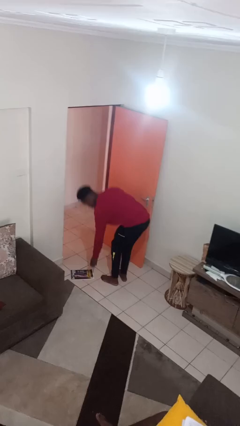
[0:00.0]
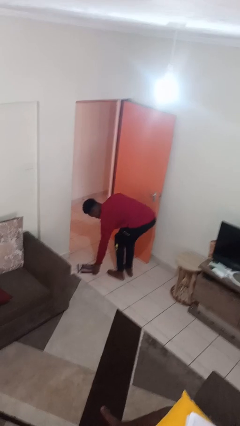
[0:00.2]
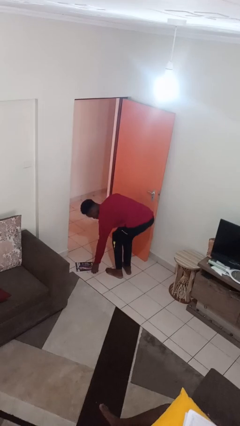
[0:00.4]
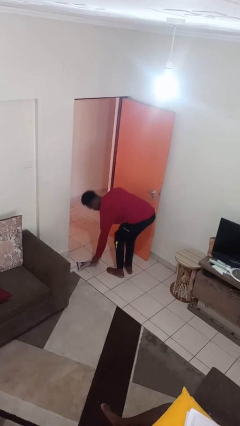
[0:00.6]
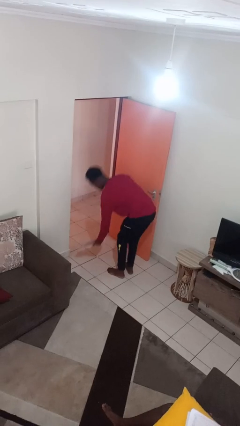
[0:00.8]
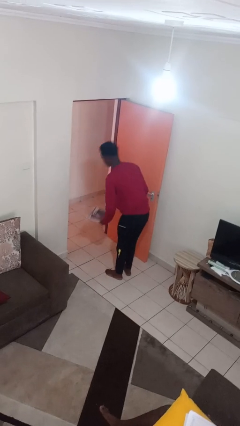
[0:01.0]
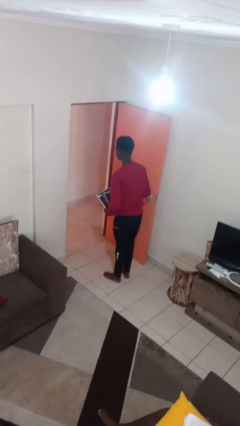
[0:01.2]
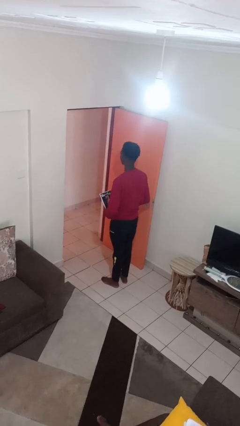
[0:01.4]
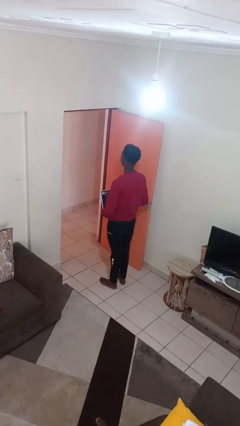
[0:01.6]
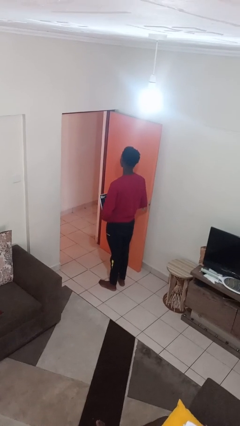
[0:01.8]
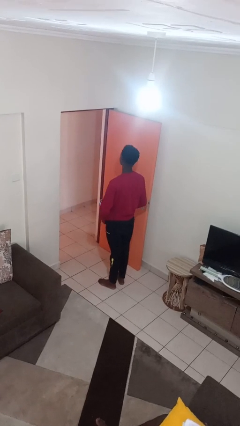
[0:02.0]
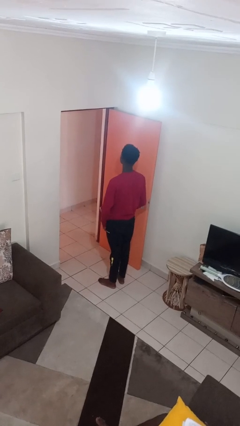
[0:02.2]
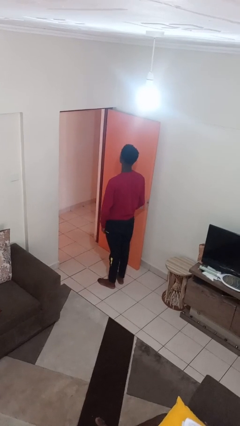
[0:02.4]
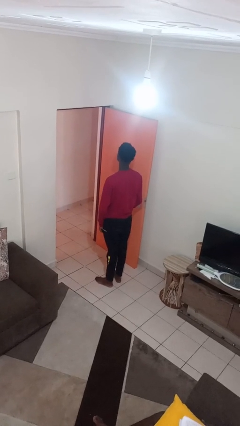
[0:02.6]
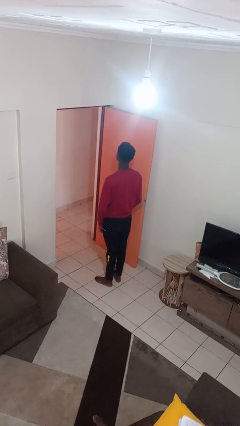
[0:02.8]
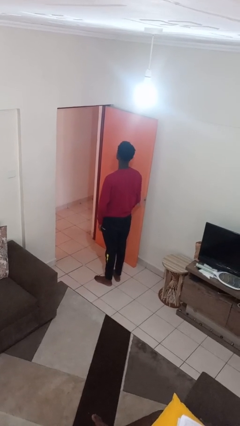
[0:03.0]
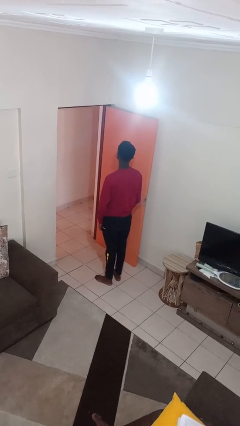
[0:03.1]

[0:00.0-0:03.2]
person picks up object from floor

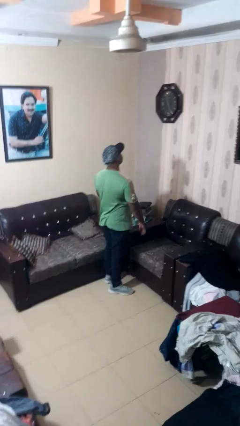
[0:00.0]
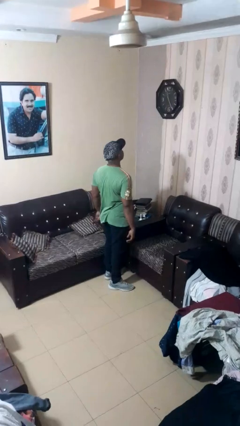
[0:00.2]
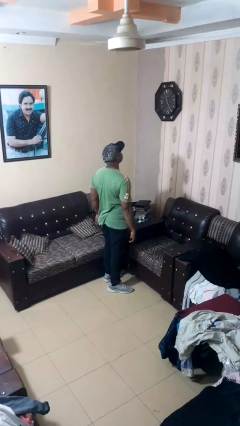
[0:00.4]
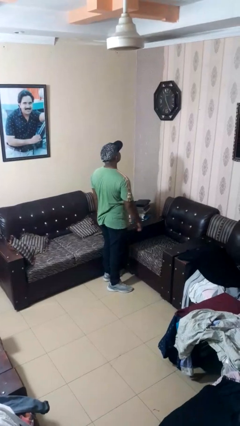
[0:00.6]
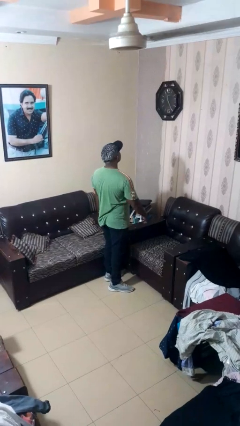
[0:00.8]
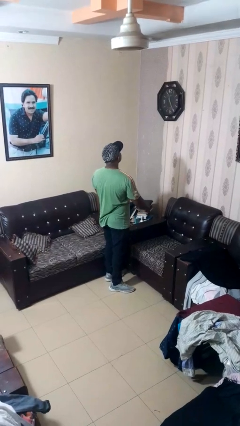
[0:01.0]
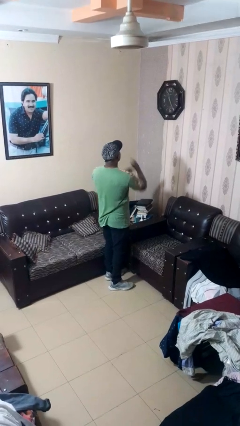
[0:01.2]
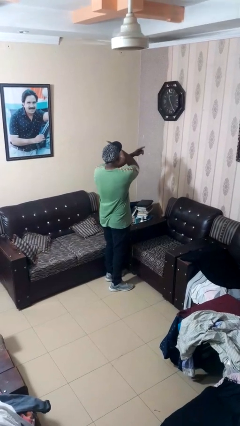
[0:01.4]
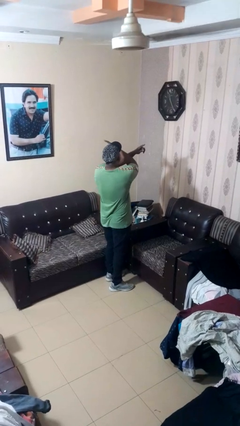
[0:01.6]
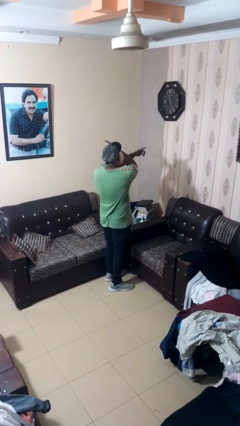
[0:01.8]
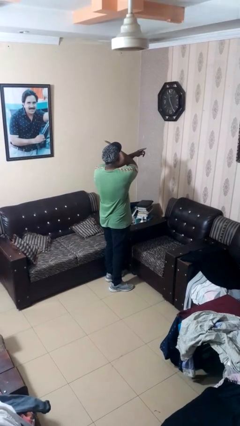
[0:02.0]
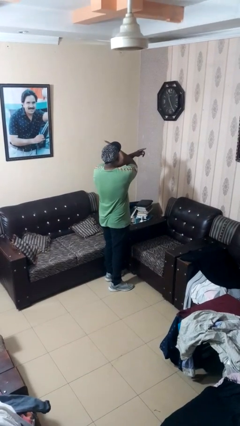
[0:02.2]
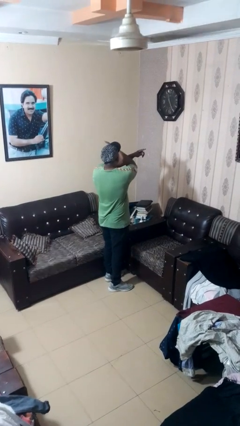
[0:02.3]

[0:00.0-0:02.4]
person gestures arms x

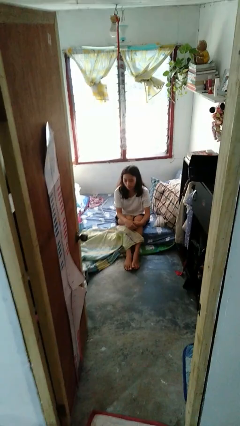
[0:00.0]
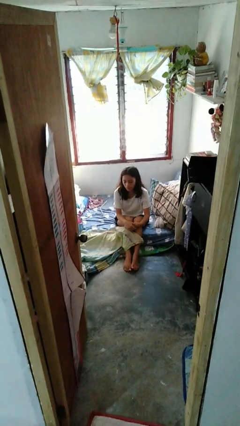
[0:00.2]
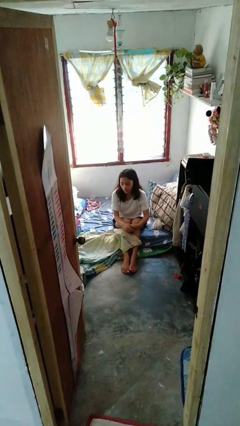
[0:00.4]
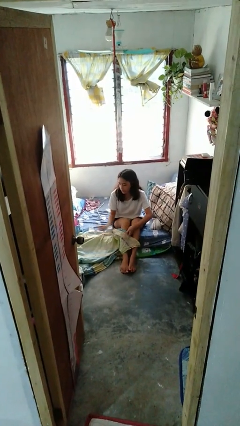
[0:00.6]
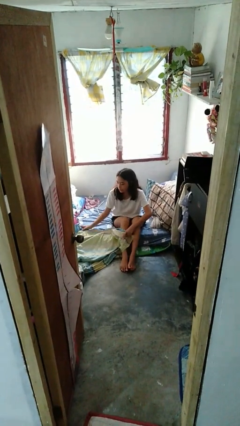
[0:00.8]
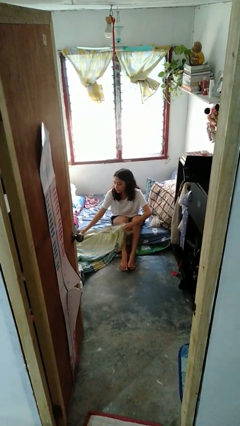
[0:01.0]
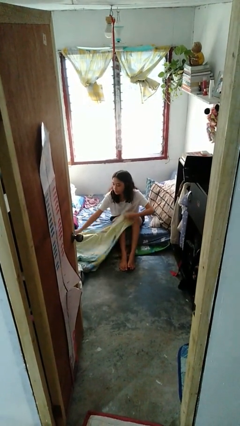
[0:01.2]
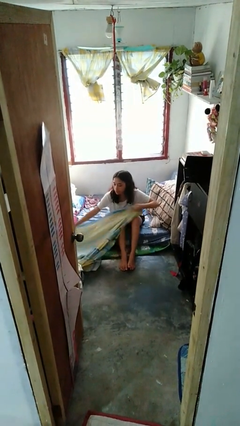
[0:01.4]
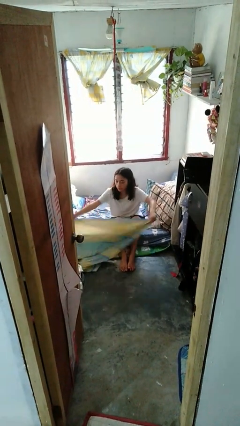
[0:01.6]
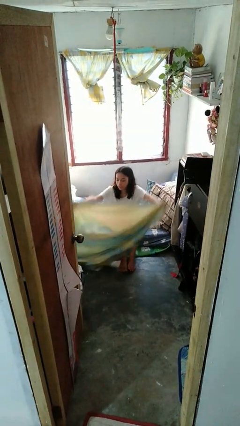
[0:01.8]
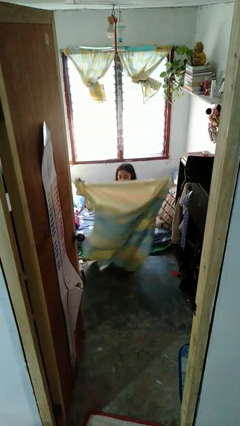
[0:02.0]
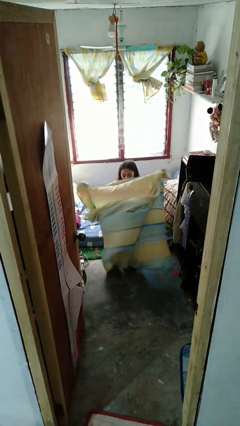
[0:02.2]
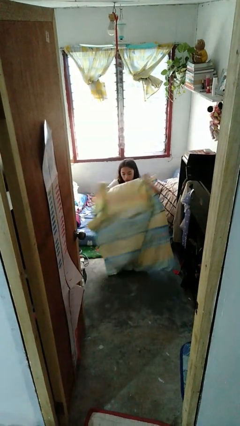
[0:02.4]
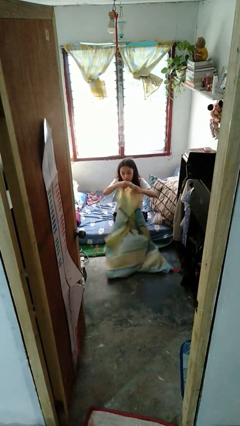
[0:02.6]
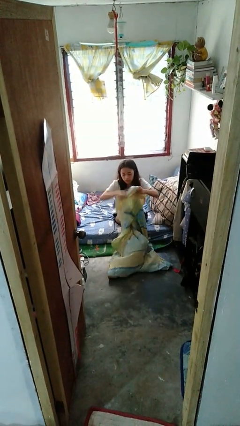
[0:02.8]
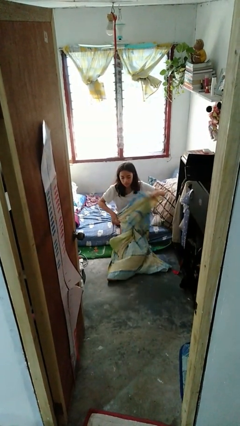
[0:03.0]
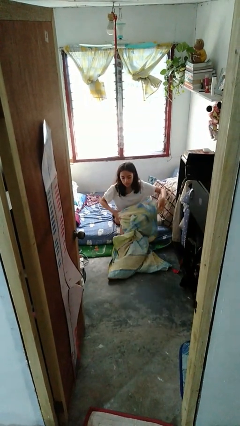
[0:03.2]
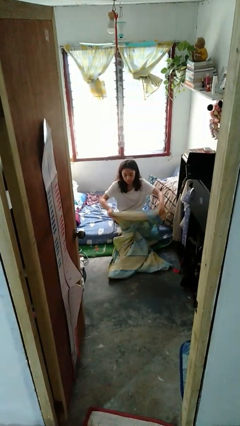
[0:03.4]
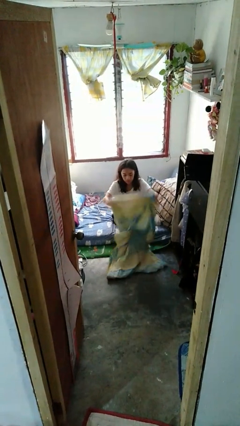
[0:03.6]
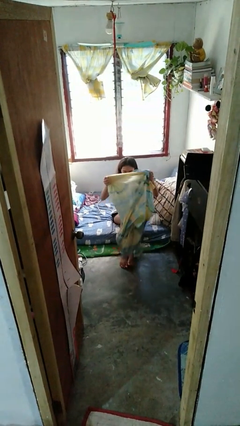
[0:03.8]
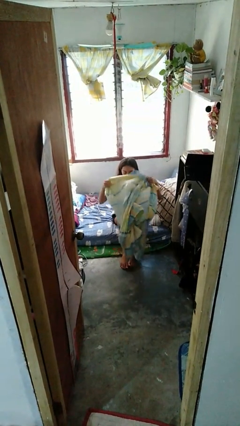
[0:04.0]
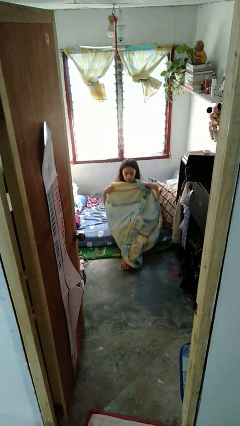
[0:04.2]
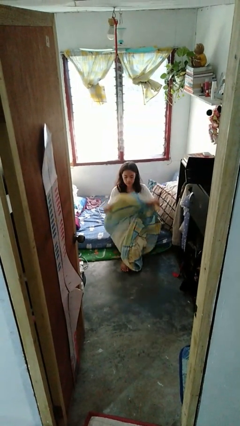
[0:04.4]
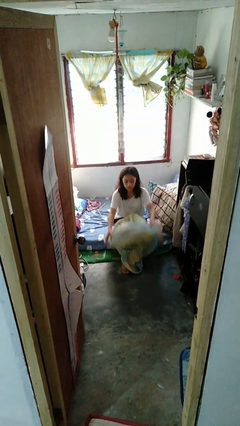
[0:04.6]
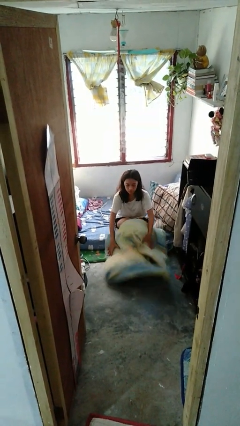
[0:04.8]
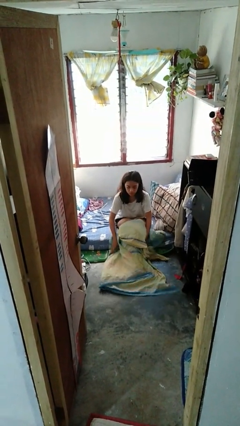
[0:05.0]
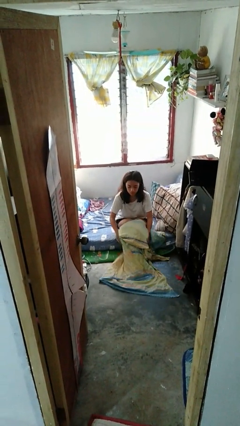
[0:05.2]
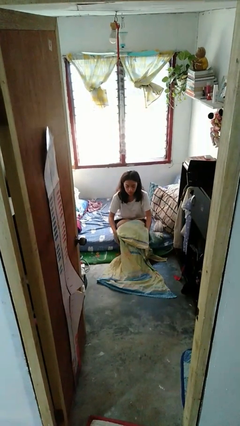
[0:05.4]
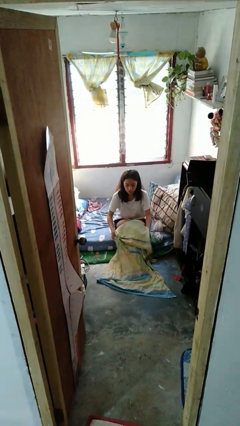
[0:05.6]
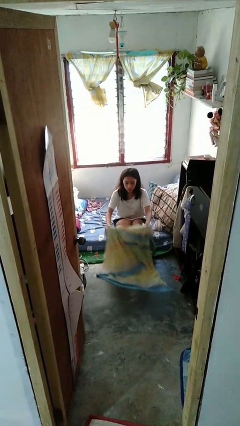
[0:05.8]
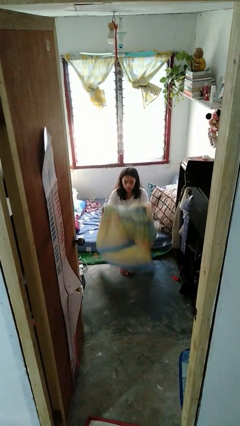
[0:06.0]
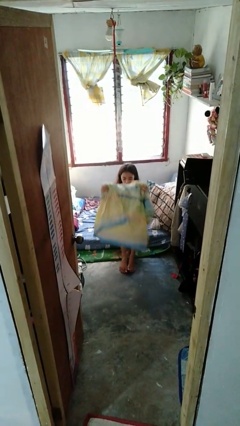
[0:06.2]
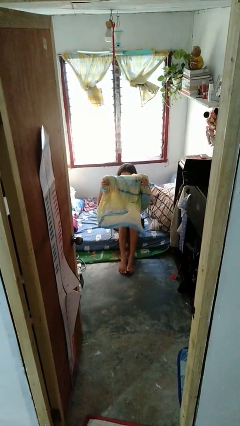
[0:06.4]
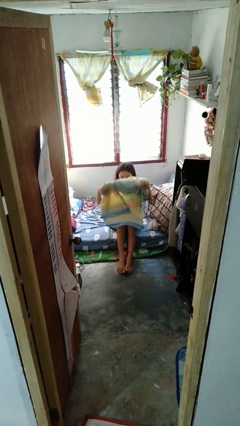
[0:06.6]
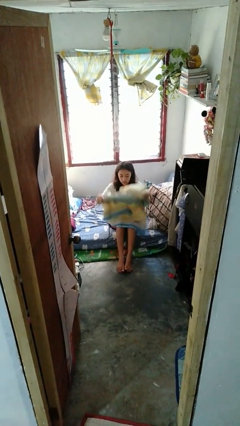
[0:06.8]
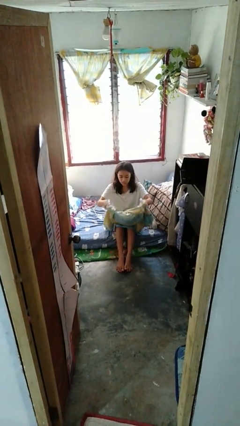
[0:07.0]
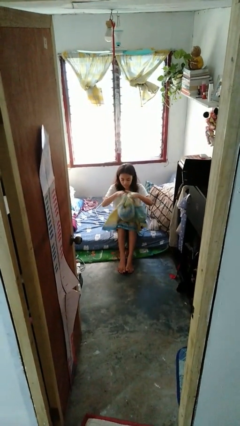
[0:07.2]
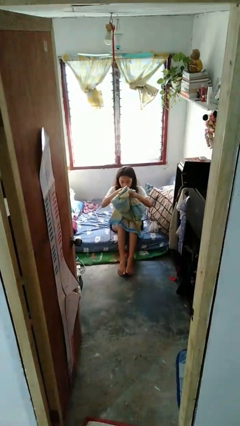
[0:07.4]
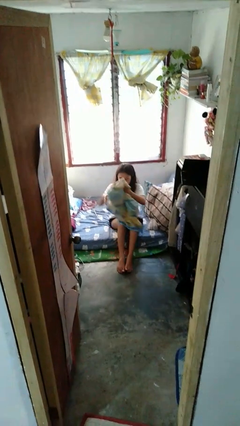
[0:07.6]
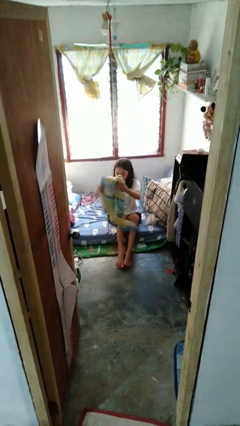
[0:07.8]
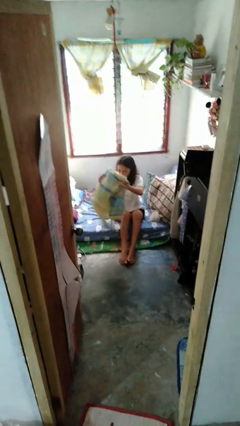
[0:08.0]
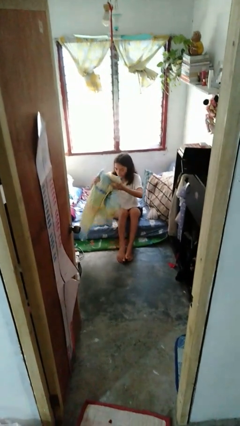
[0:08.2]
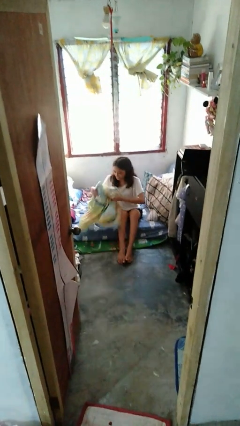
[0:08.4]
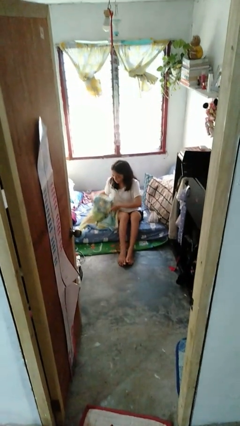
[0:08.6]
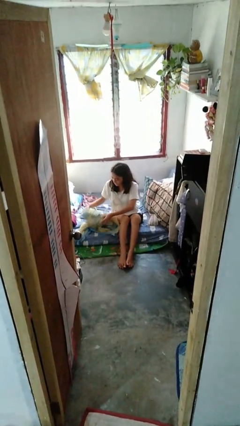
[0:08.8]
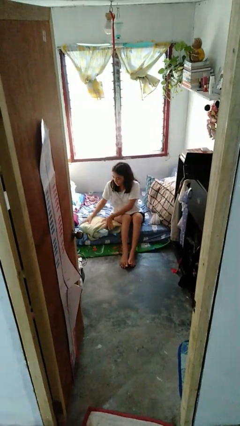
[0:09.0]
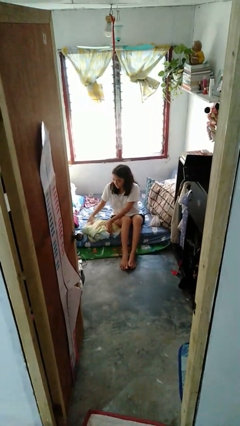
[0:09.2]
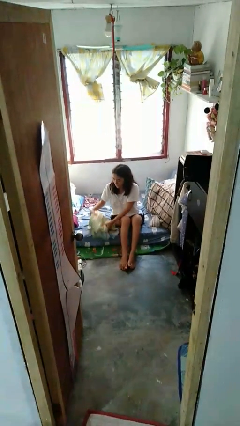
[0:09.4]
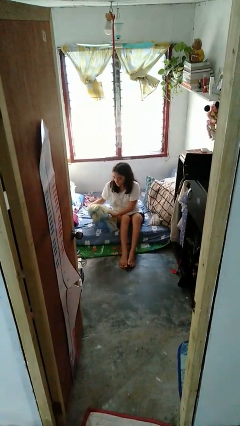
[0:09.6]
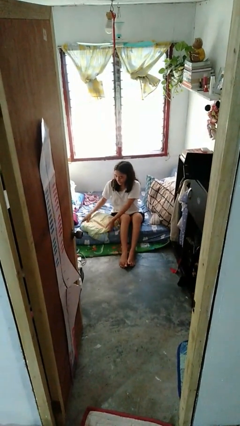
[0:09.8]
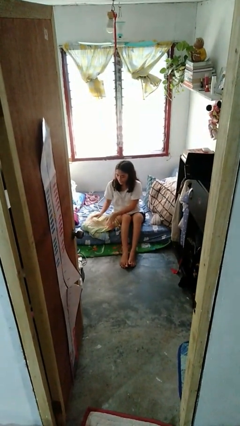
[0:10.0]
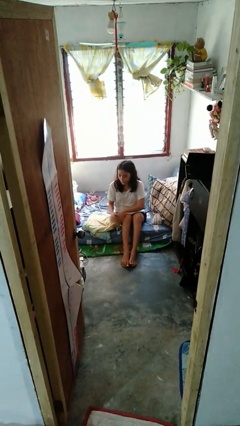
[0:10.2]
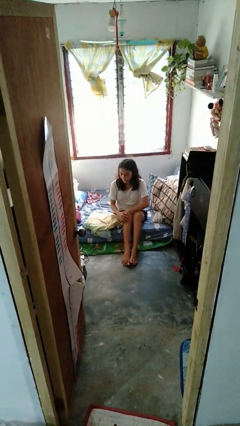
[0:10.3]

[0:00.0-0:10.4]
person folds blanket

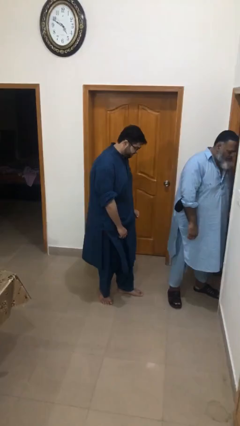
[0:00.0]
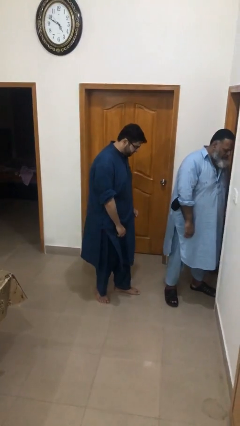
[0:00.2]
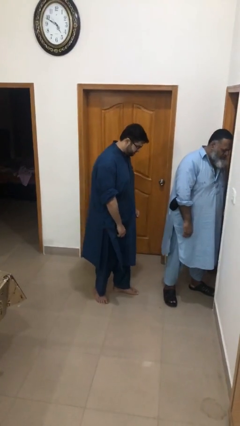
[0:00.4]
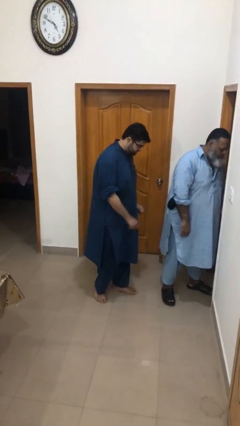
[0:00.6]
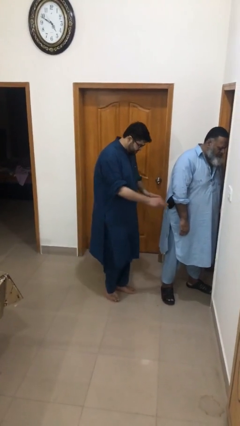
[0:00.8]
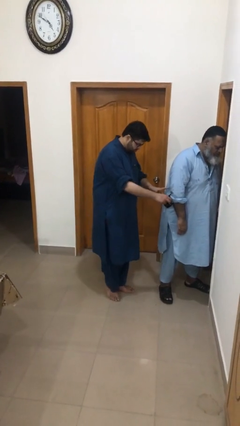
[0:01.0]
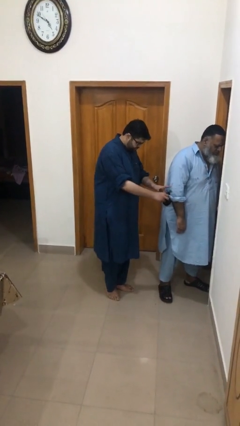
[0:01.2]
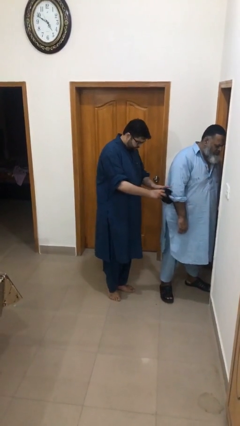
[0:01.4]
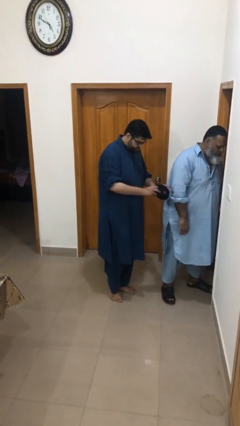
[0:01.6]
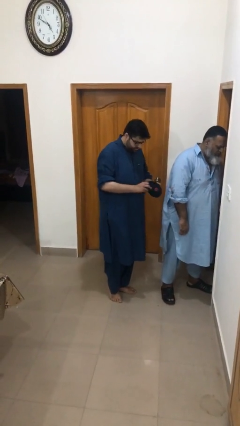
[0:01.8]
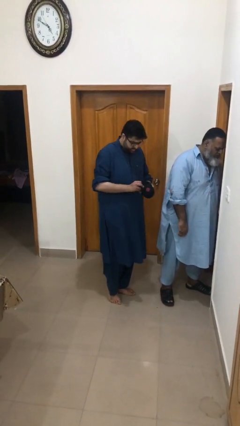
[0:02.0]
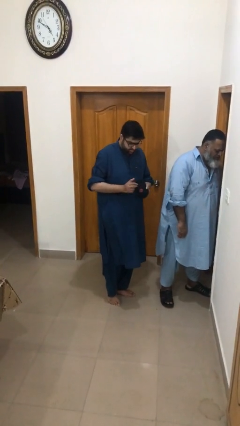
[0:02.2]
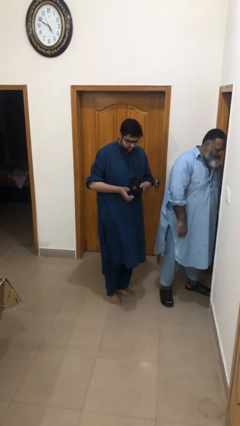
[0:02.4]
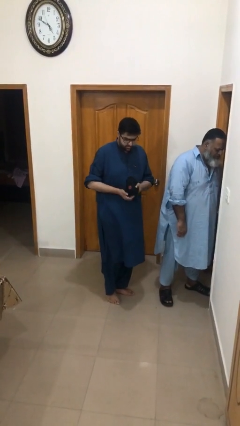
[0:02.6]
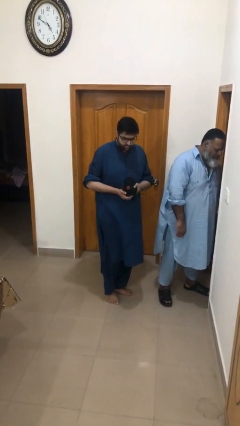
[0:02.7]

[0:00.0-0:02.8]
person steals object from person
